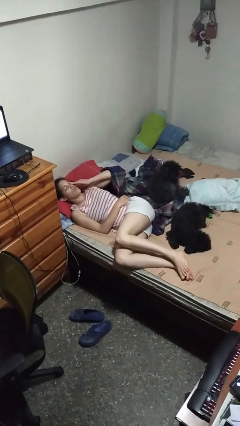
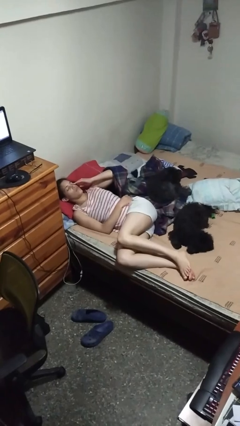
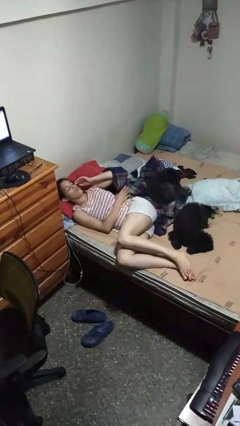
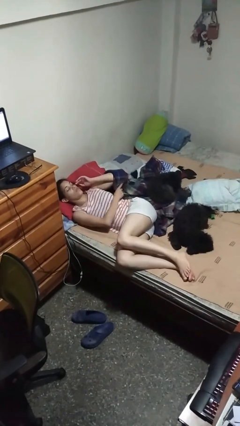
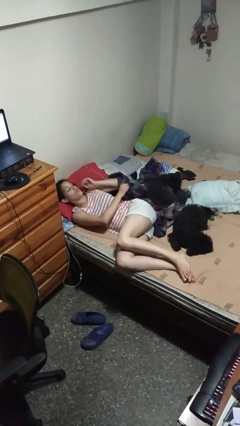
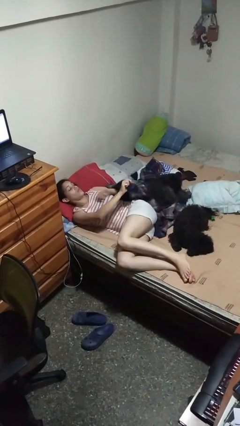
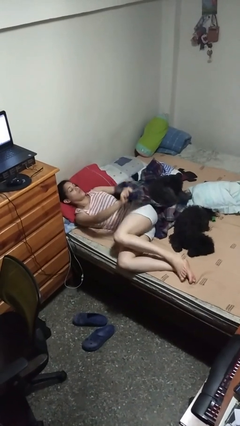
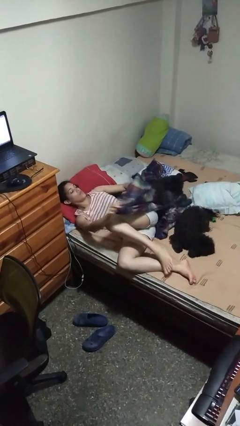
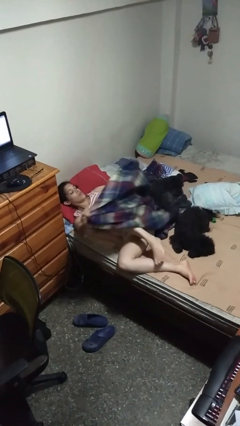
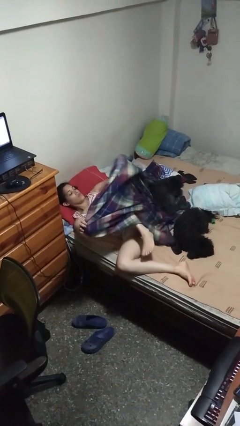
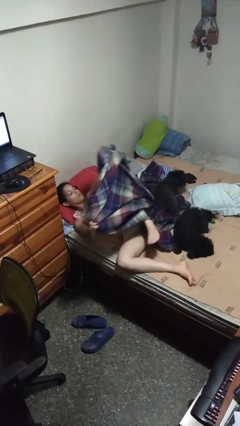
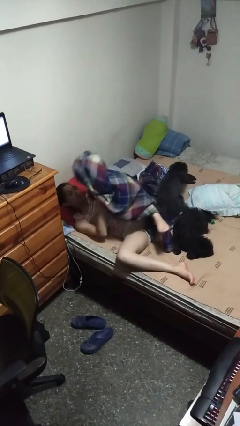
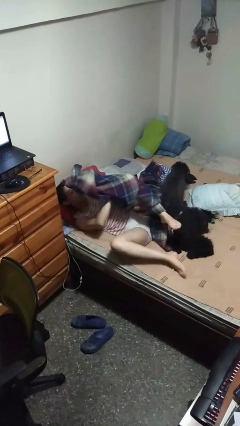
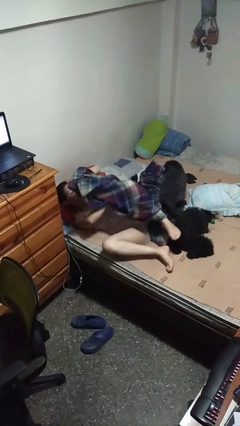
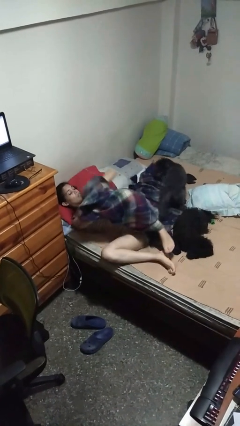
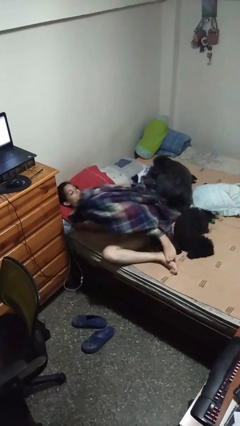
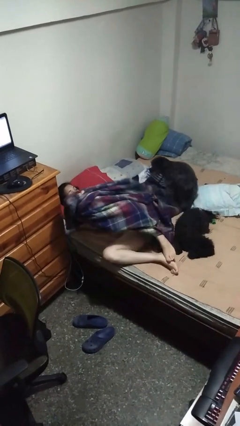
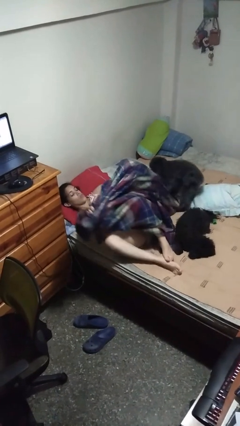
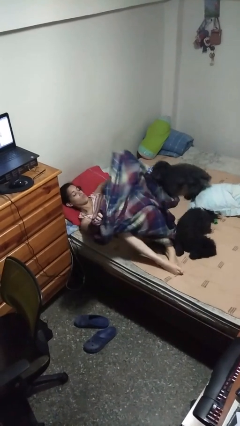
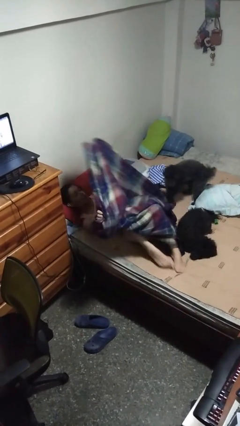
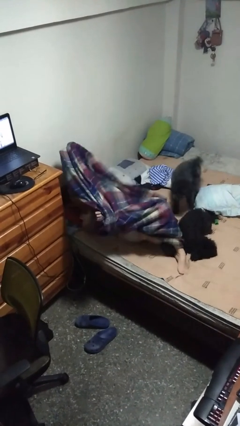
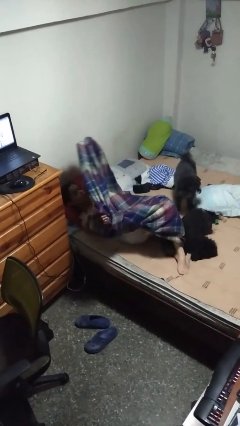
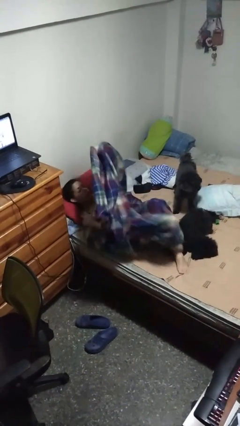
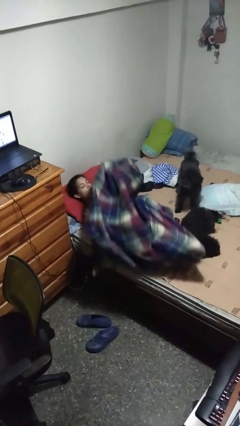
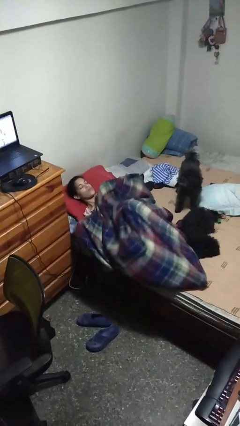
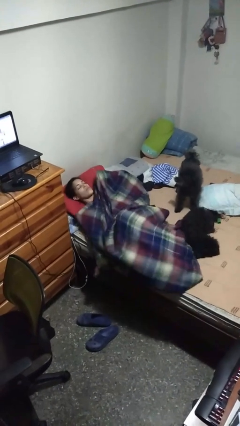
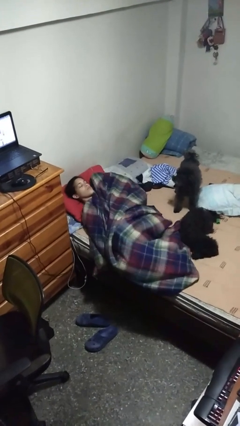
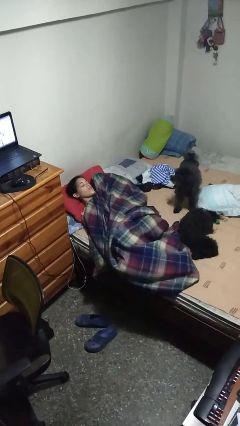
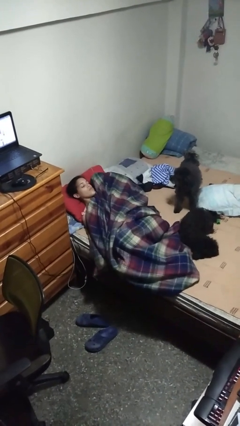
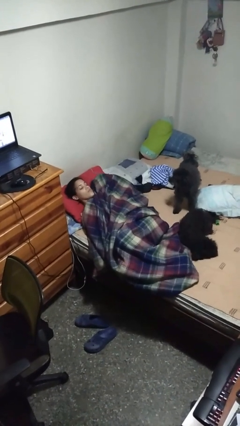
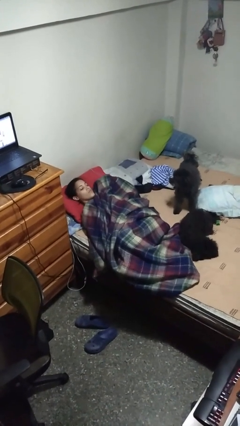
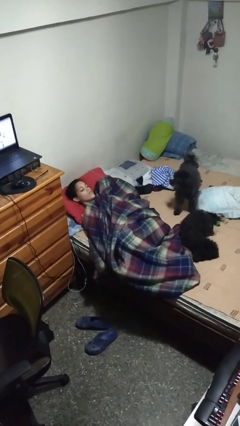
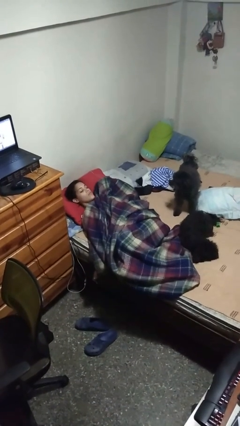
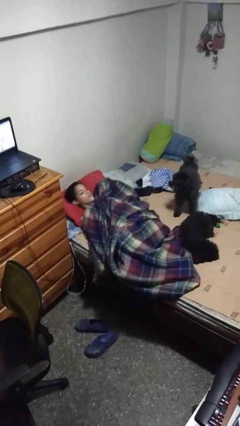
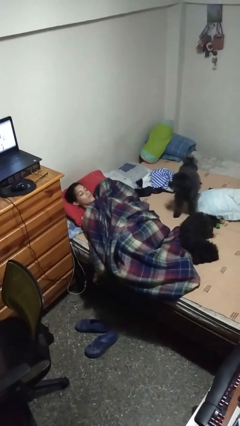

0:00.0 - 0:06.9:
person covers with bedsheets

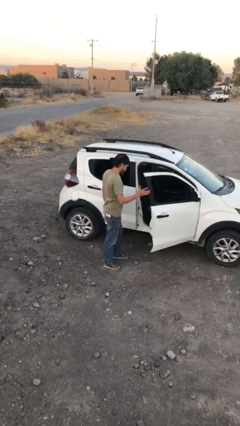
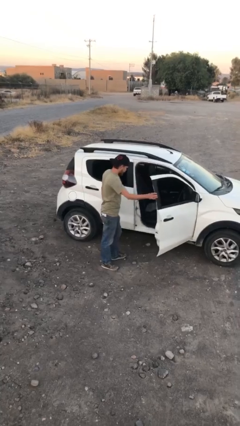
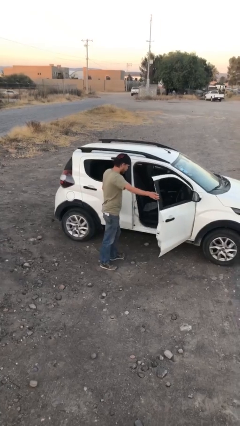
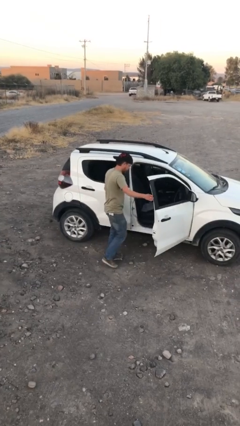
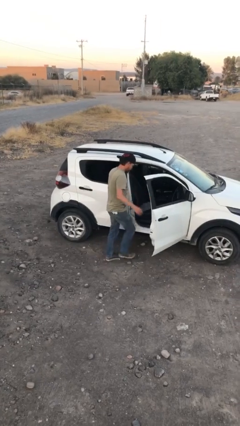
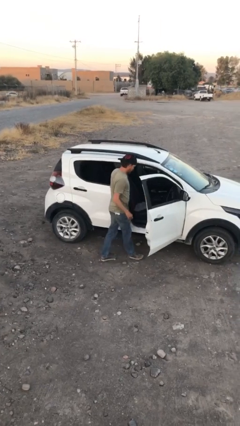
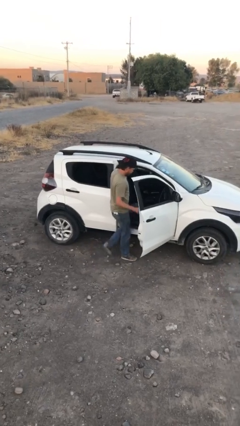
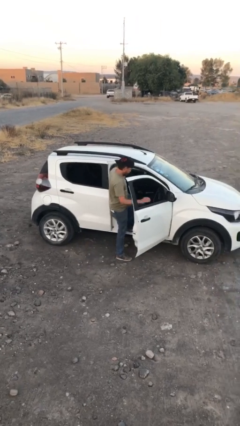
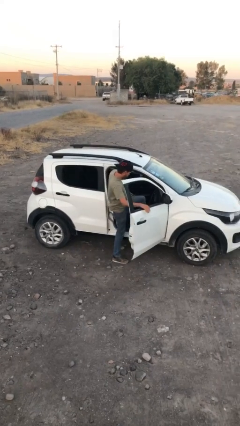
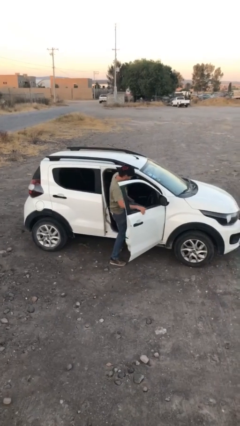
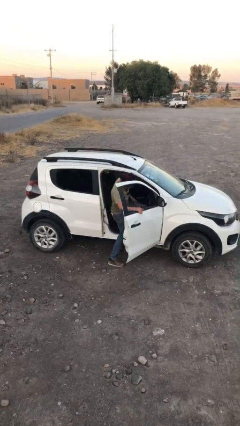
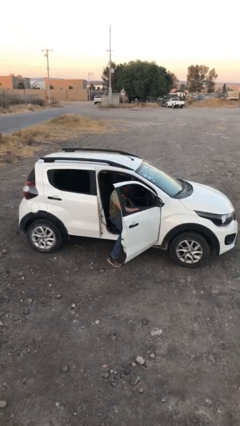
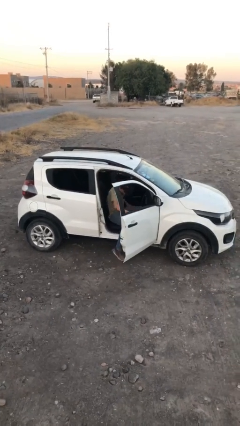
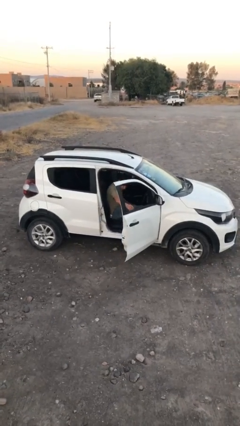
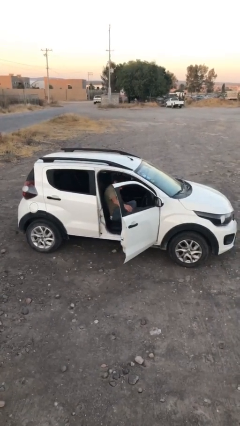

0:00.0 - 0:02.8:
person enters car

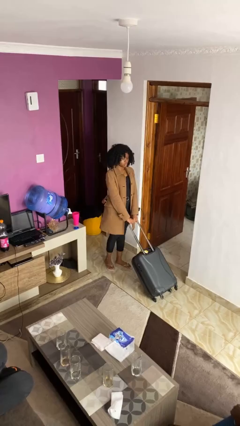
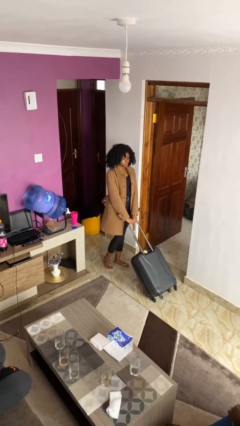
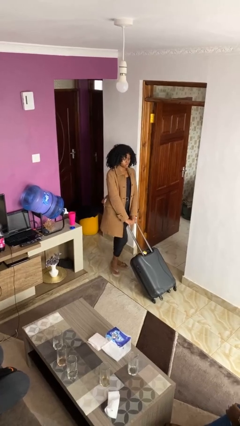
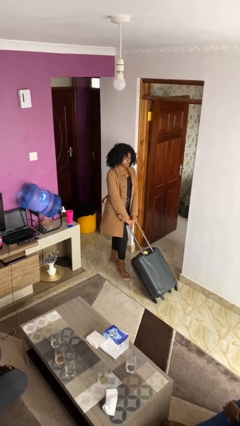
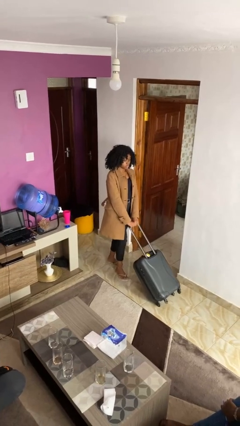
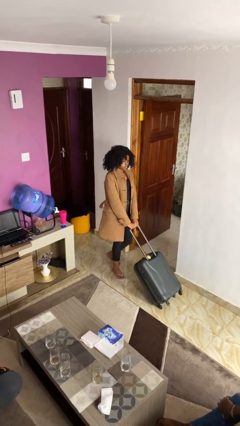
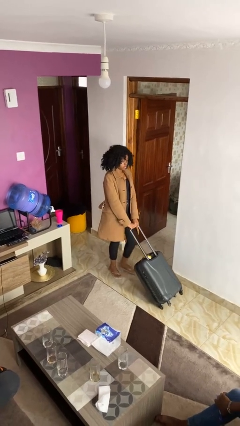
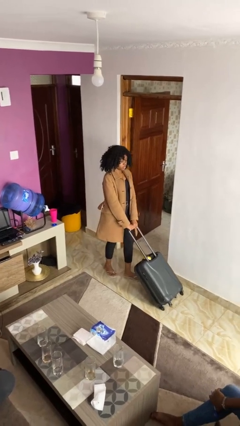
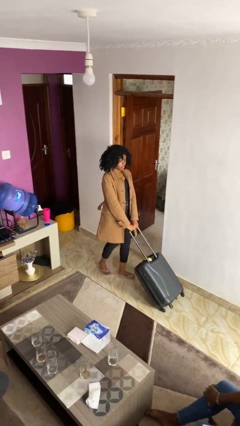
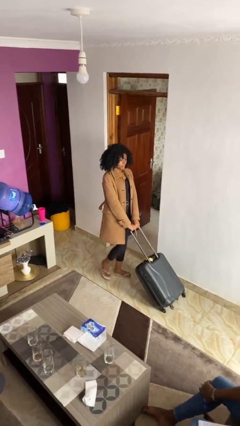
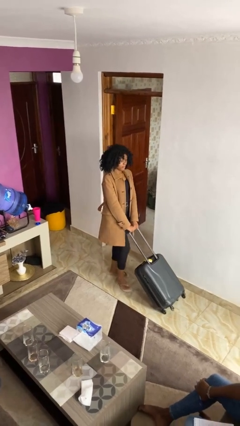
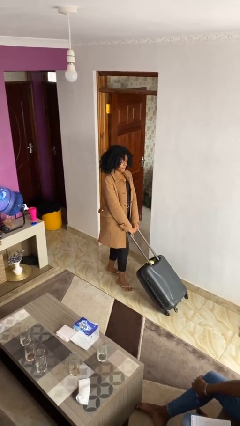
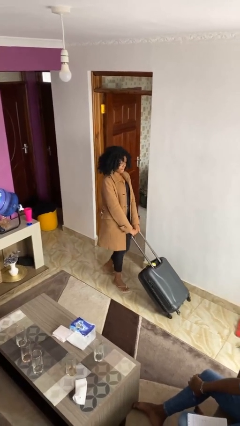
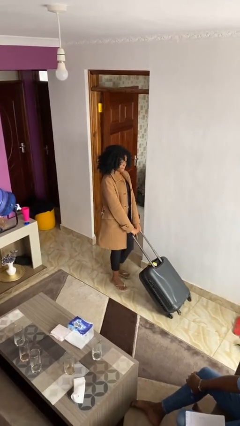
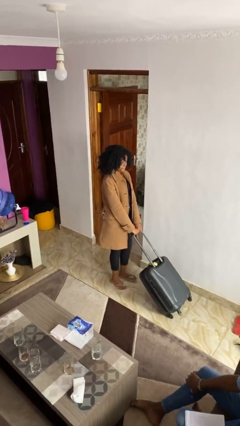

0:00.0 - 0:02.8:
person pushes wheeled cart

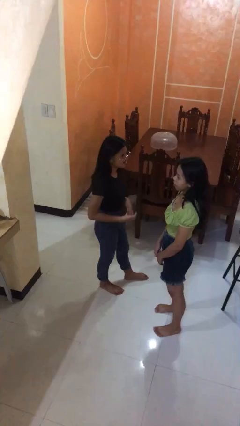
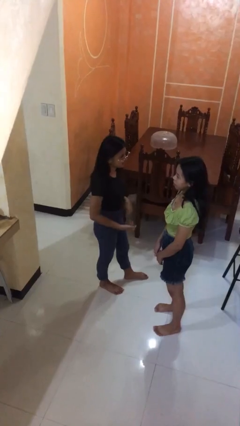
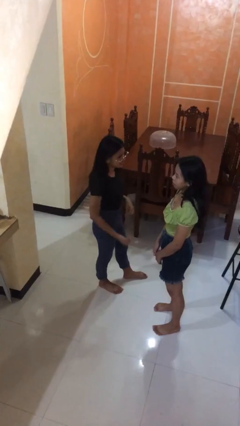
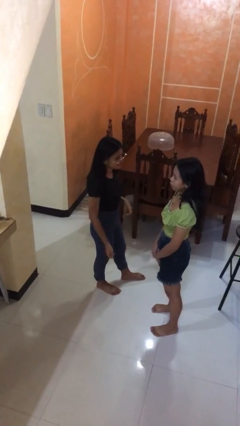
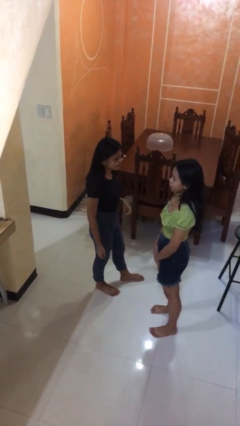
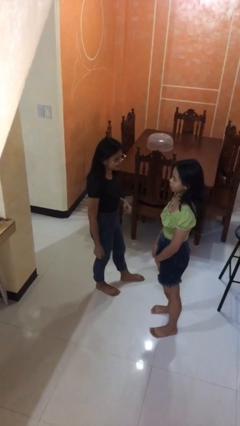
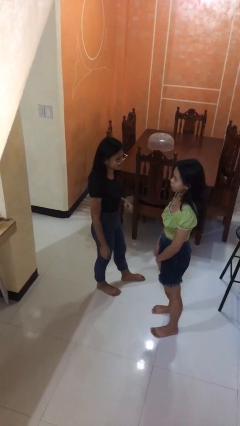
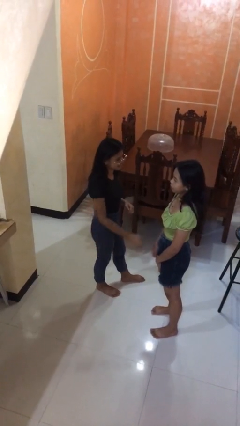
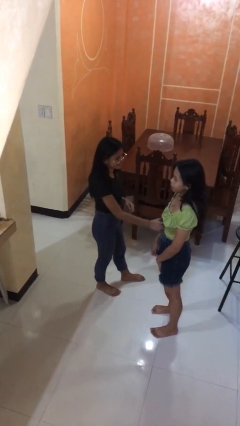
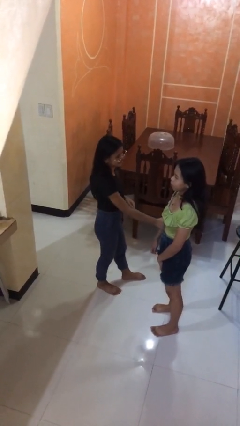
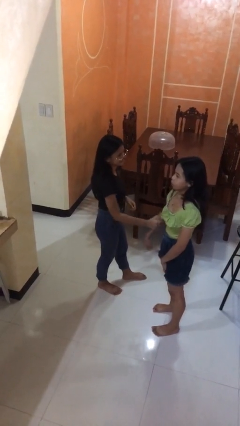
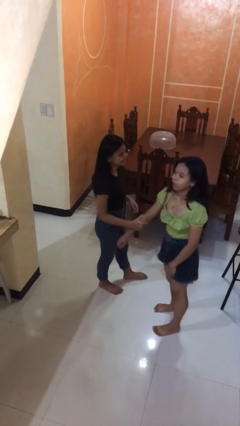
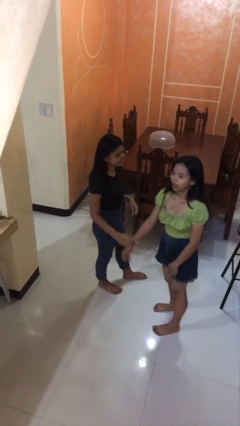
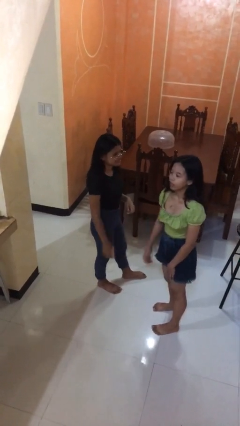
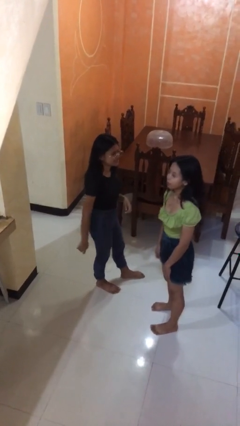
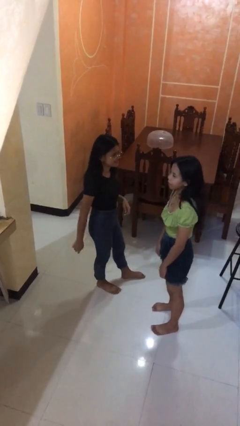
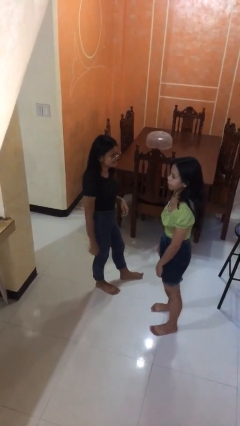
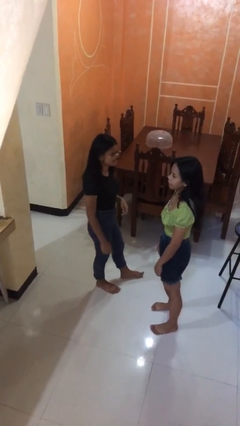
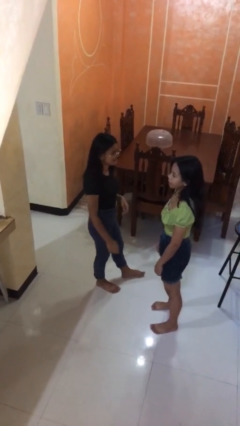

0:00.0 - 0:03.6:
person grabs person by forearm

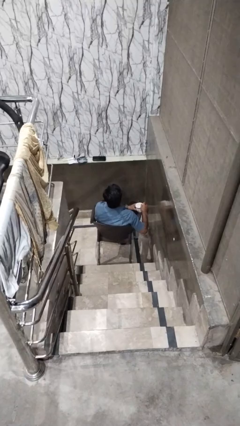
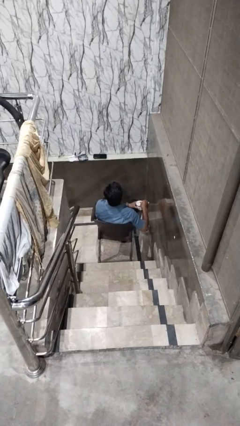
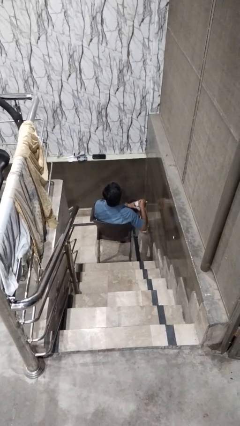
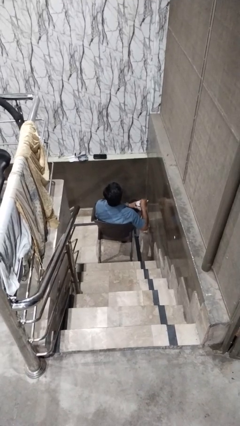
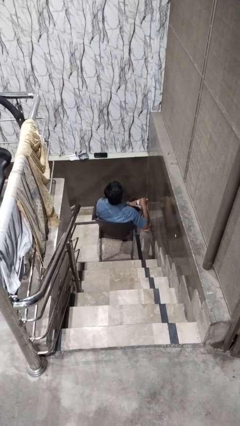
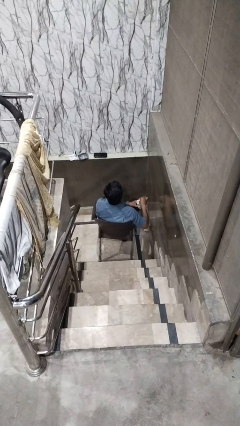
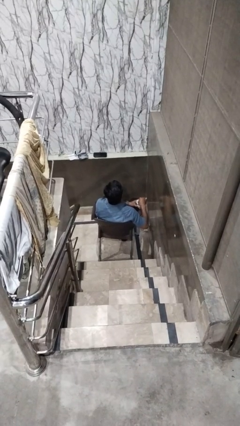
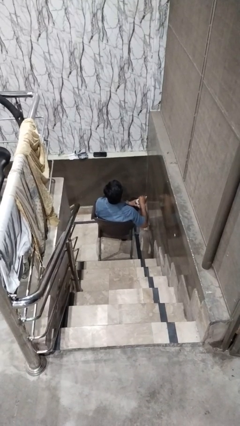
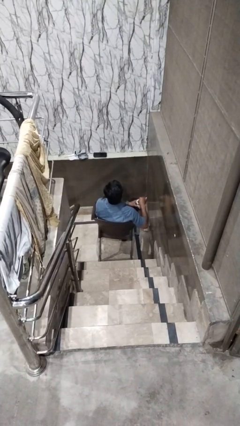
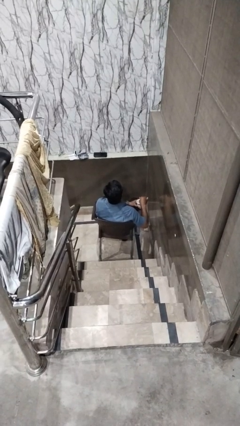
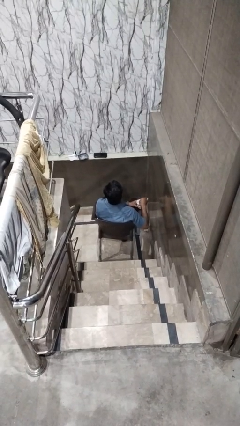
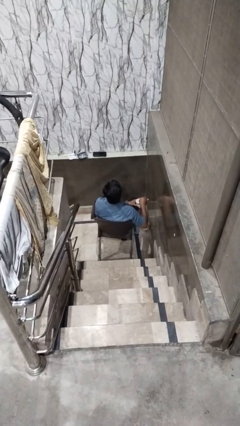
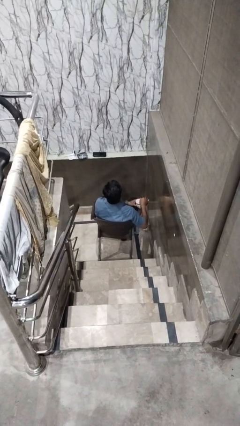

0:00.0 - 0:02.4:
person stirs mug
